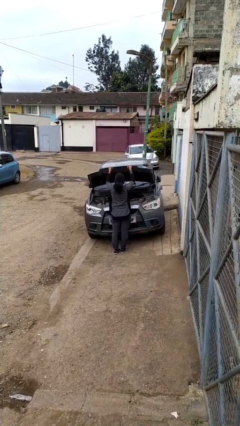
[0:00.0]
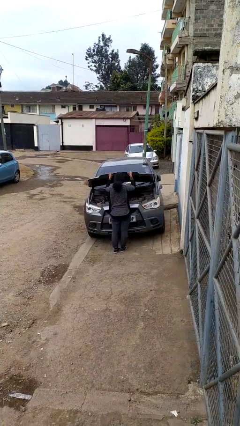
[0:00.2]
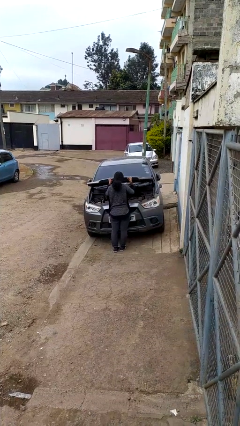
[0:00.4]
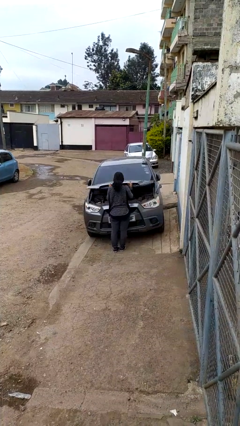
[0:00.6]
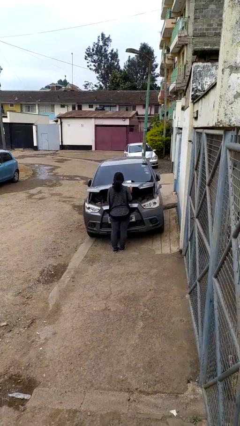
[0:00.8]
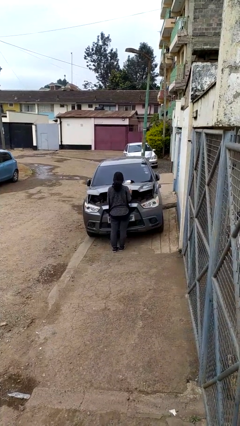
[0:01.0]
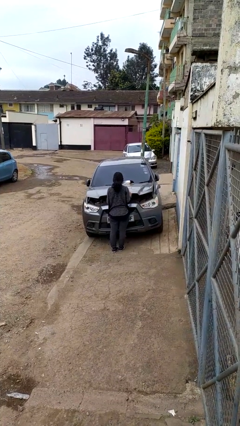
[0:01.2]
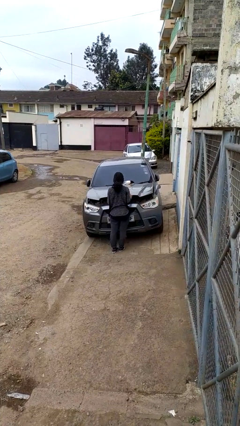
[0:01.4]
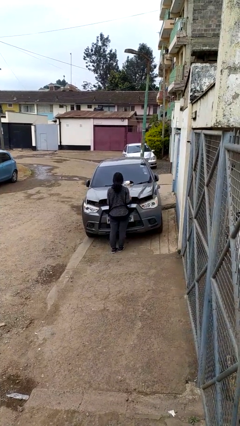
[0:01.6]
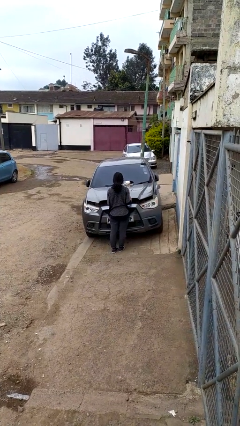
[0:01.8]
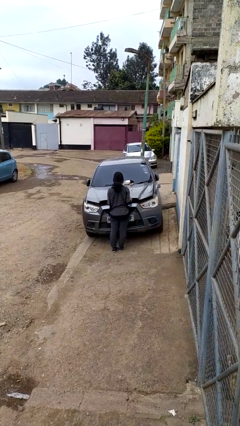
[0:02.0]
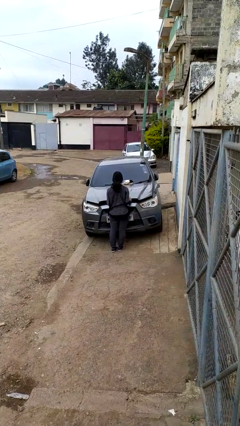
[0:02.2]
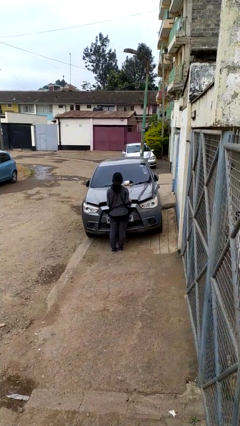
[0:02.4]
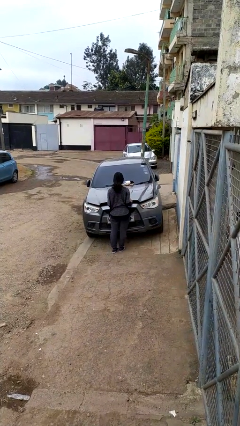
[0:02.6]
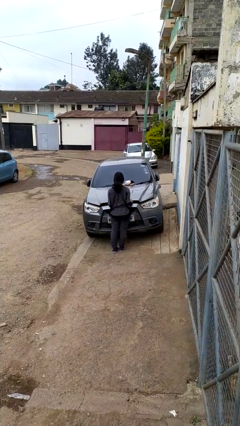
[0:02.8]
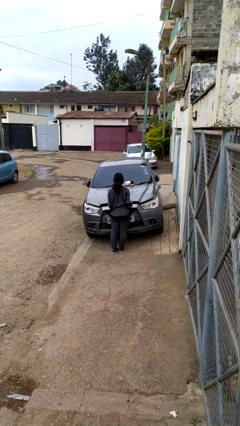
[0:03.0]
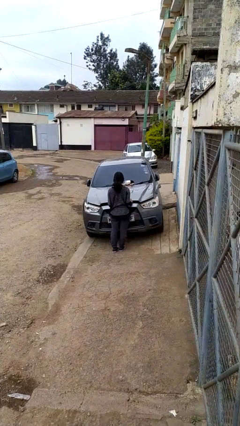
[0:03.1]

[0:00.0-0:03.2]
person closes car hood

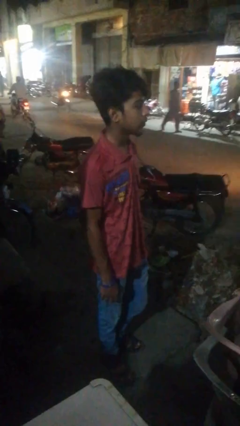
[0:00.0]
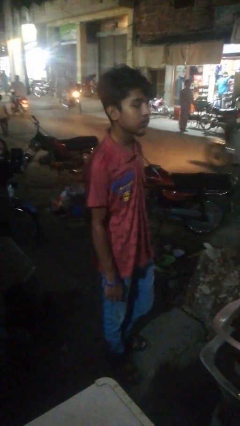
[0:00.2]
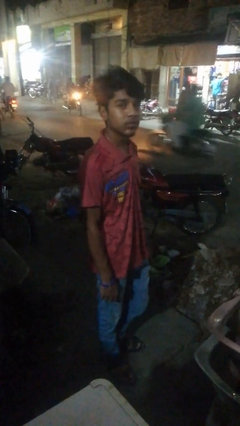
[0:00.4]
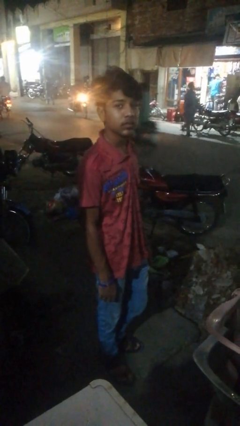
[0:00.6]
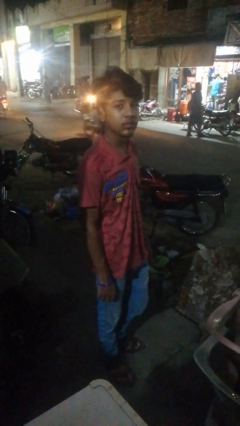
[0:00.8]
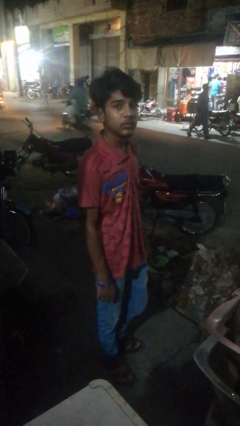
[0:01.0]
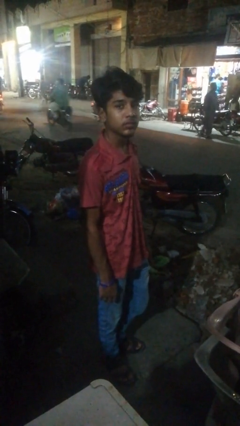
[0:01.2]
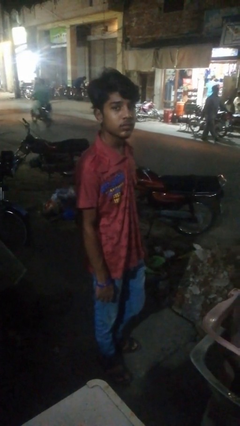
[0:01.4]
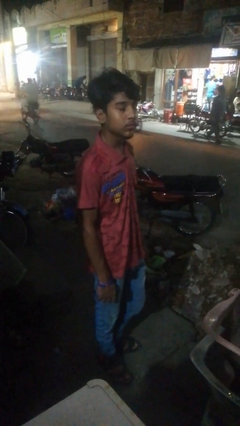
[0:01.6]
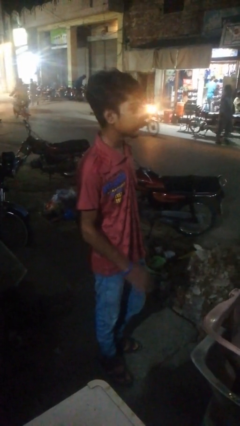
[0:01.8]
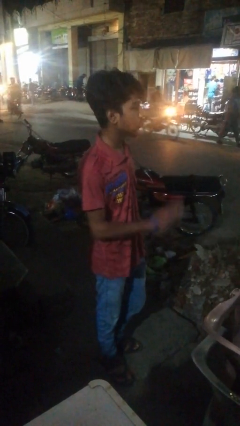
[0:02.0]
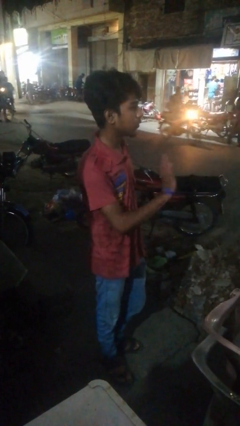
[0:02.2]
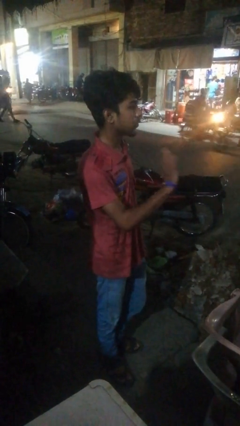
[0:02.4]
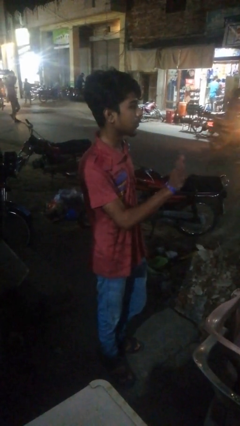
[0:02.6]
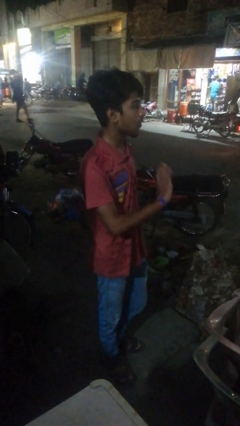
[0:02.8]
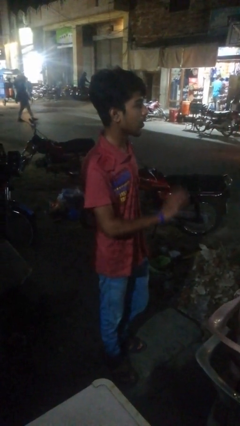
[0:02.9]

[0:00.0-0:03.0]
person waves at person

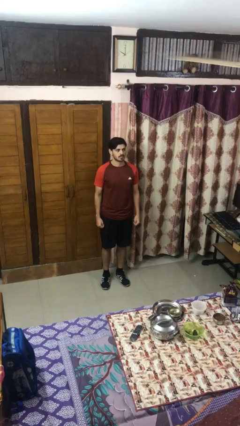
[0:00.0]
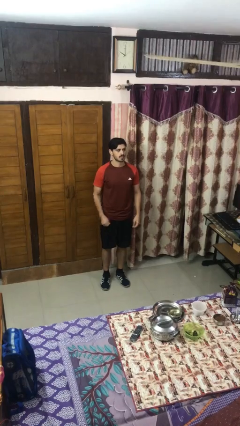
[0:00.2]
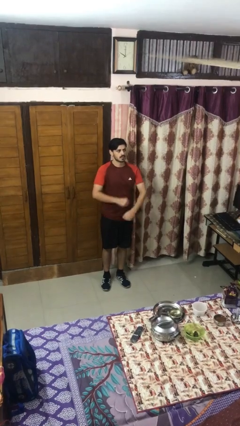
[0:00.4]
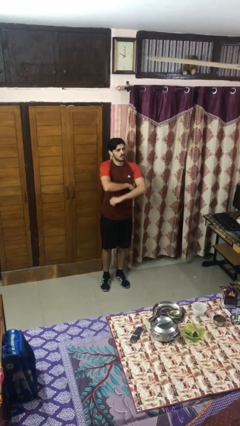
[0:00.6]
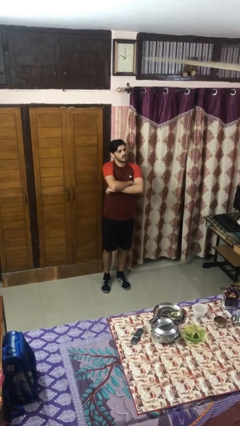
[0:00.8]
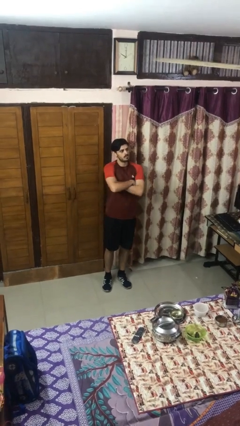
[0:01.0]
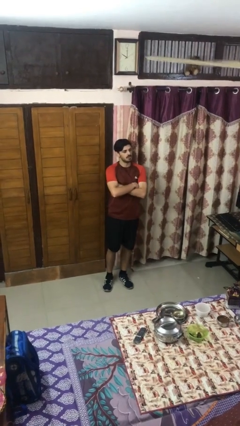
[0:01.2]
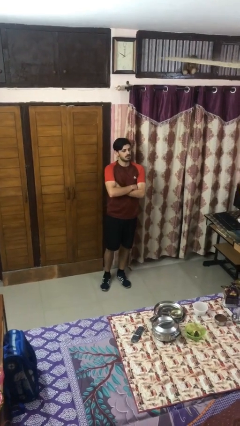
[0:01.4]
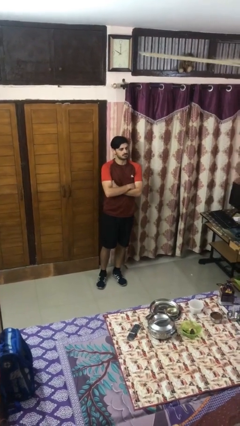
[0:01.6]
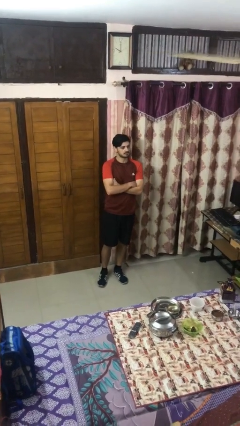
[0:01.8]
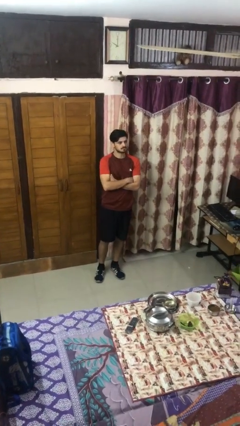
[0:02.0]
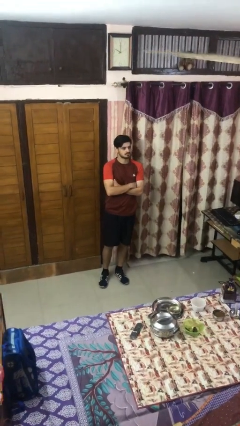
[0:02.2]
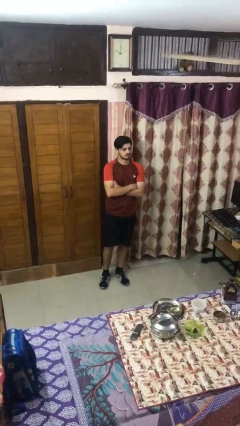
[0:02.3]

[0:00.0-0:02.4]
person crosses arms

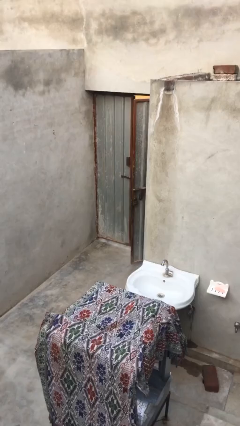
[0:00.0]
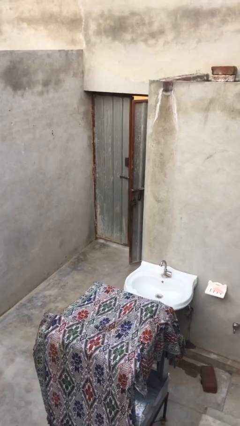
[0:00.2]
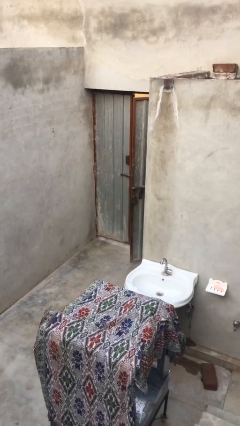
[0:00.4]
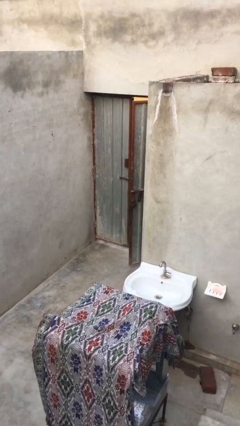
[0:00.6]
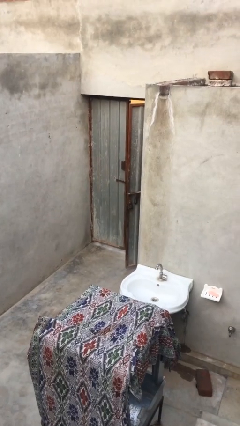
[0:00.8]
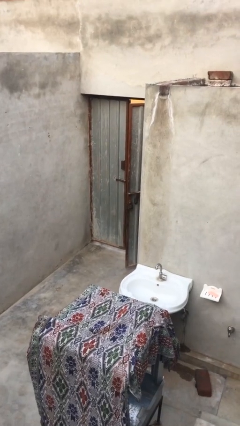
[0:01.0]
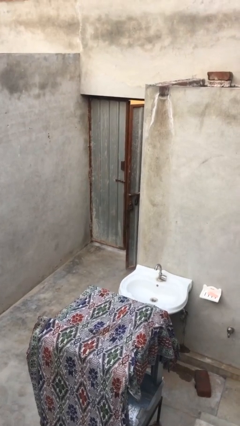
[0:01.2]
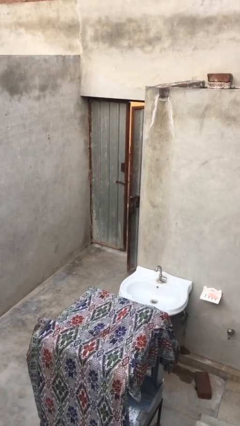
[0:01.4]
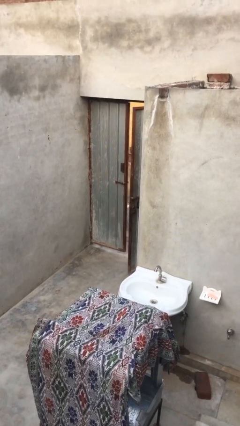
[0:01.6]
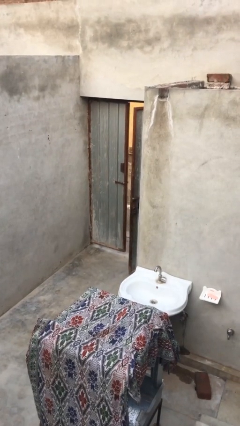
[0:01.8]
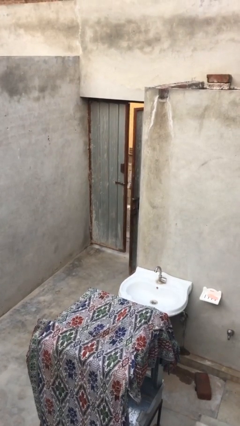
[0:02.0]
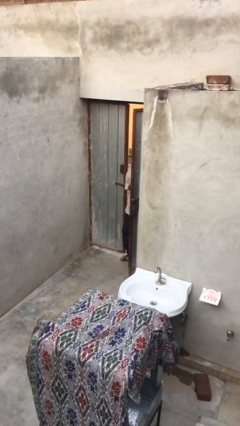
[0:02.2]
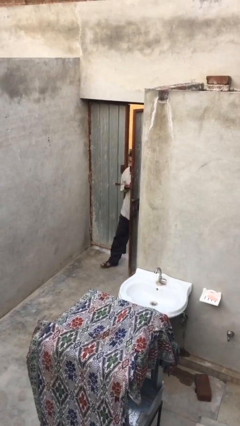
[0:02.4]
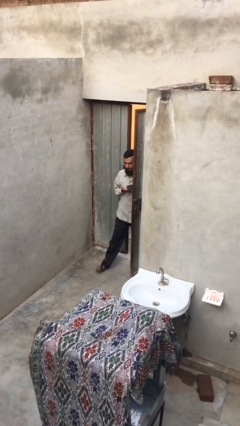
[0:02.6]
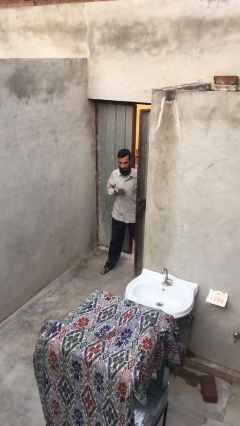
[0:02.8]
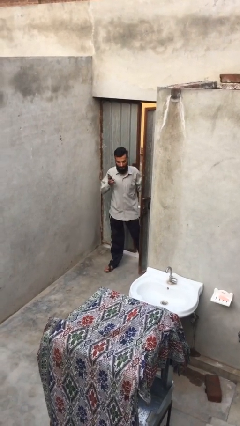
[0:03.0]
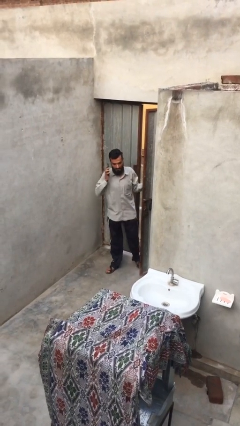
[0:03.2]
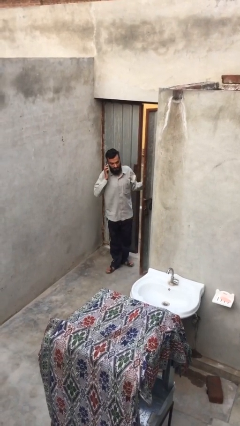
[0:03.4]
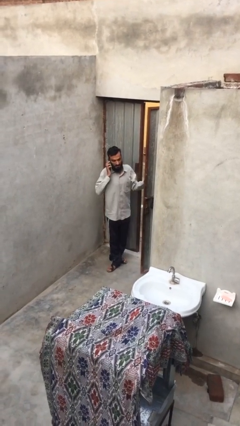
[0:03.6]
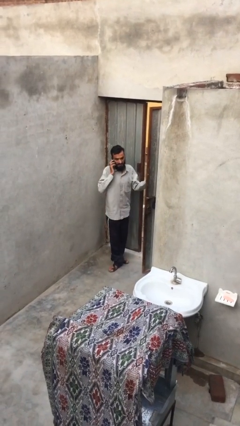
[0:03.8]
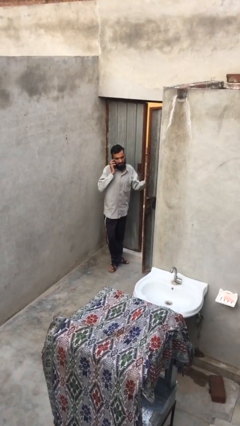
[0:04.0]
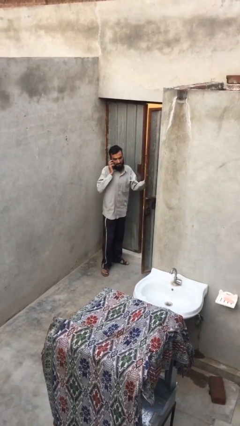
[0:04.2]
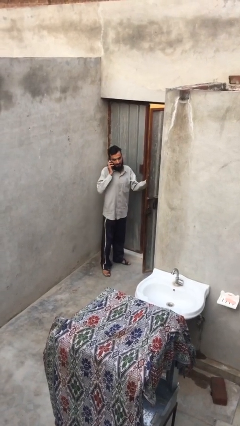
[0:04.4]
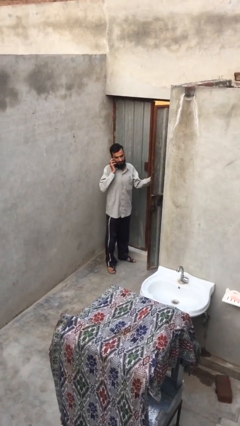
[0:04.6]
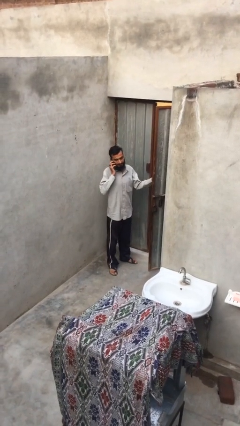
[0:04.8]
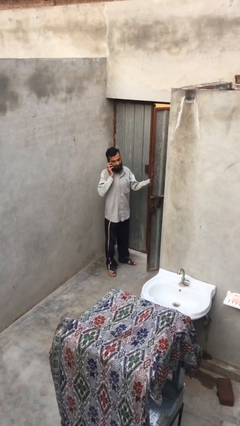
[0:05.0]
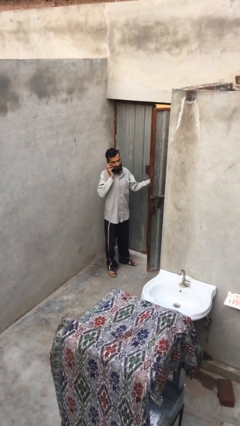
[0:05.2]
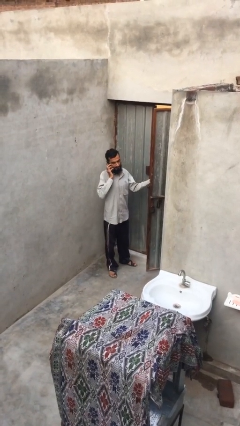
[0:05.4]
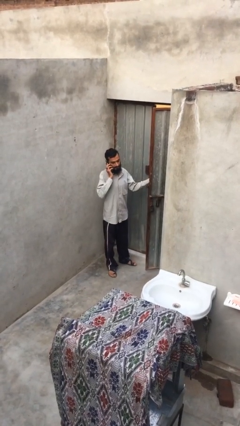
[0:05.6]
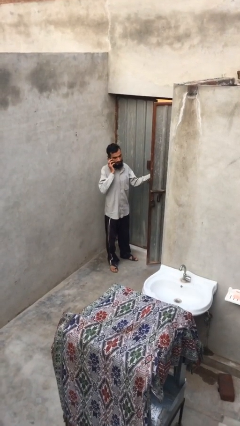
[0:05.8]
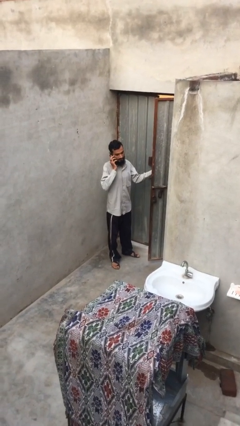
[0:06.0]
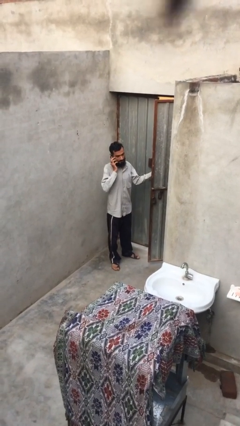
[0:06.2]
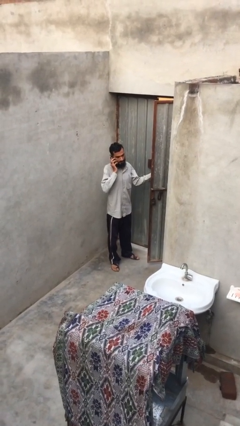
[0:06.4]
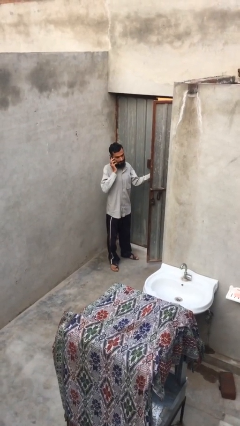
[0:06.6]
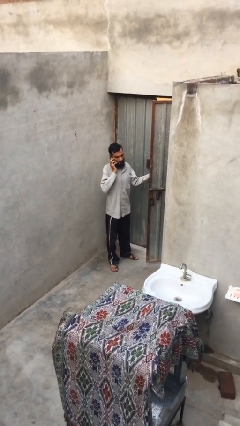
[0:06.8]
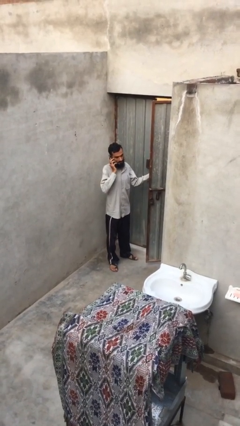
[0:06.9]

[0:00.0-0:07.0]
person enters scene through structure

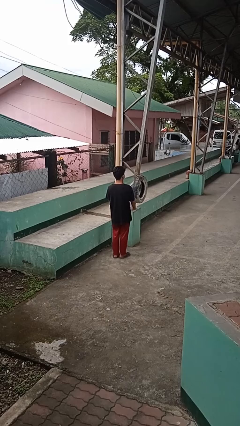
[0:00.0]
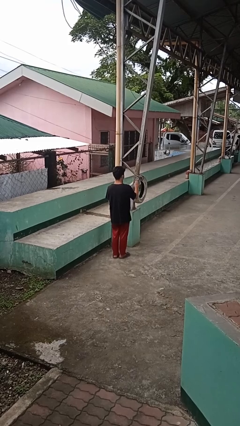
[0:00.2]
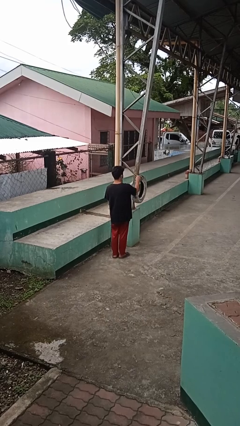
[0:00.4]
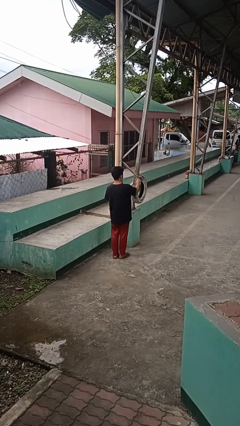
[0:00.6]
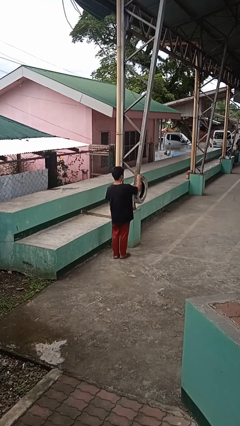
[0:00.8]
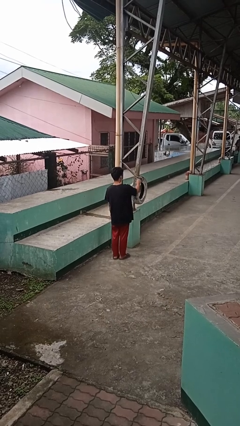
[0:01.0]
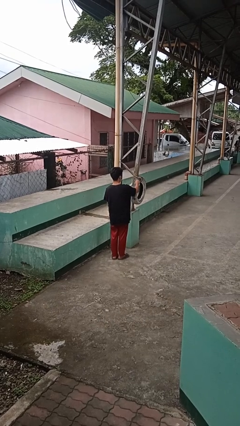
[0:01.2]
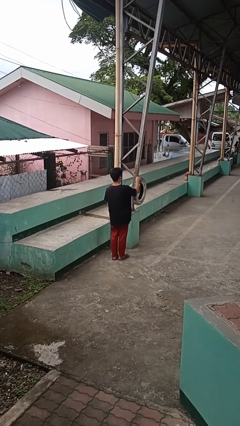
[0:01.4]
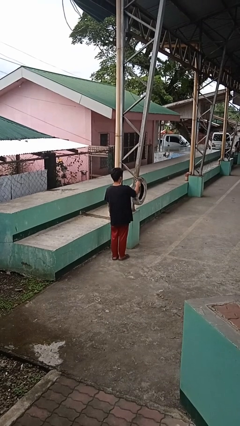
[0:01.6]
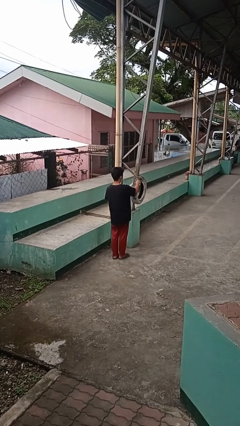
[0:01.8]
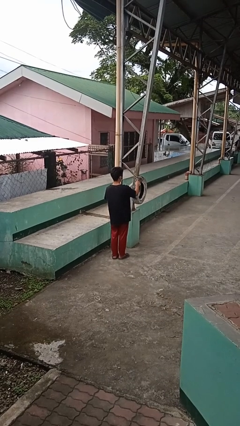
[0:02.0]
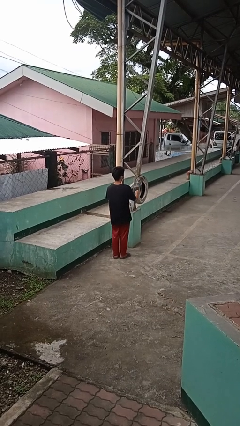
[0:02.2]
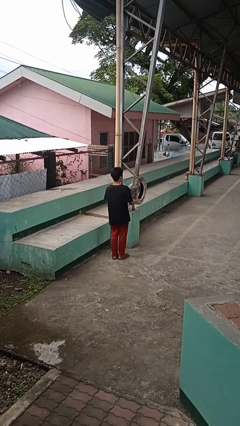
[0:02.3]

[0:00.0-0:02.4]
person taps object with finger
